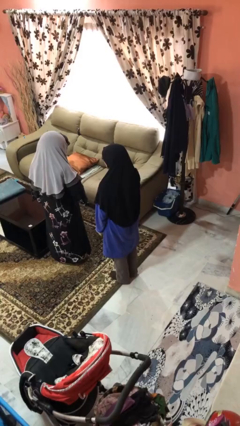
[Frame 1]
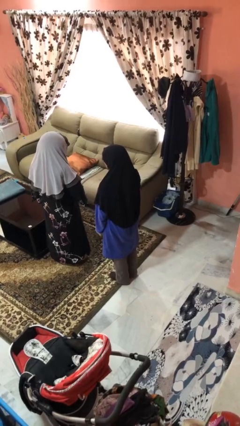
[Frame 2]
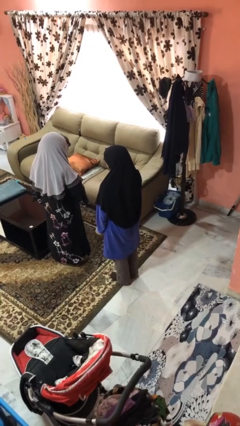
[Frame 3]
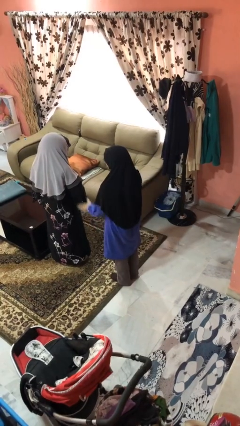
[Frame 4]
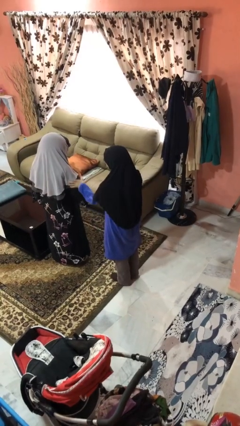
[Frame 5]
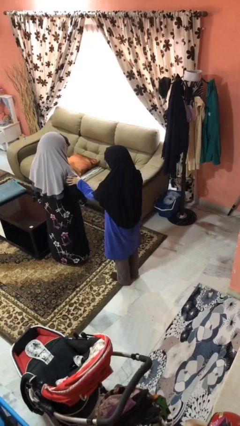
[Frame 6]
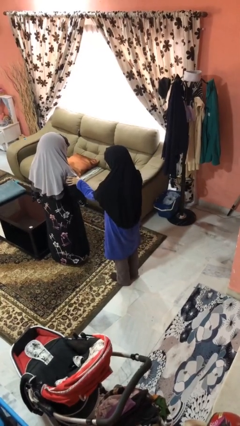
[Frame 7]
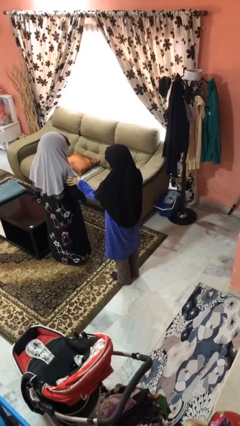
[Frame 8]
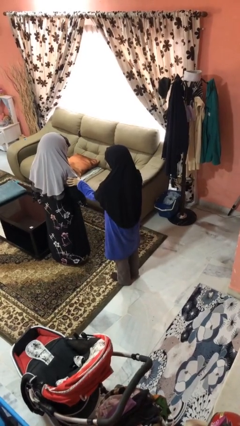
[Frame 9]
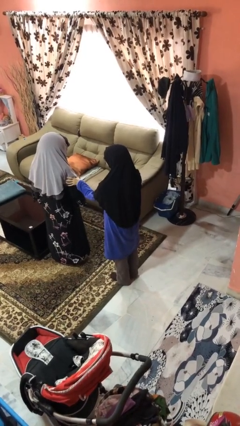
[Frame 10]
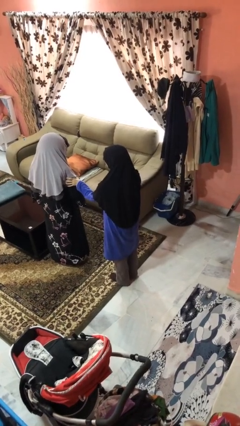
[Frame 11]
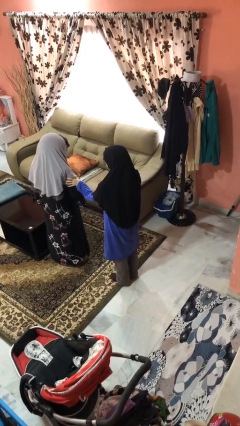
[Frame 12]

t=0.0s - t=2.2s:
person grabs person by bicep

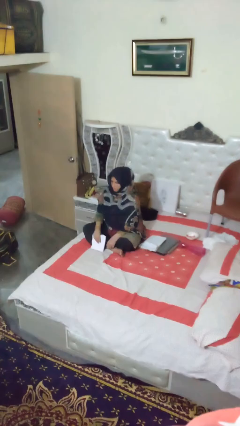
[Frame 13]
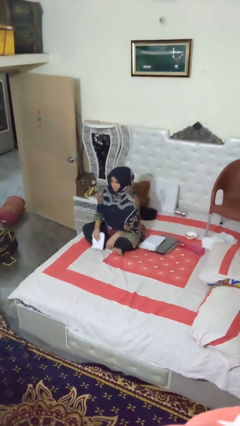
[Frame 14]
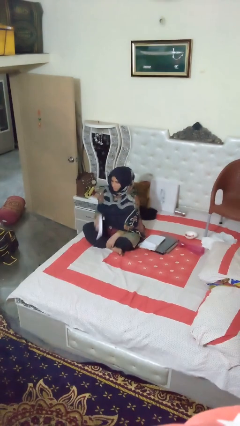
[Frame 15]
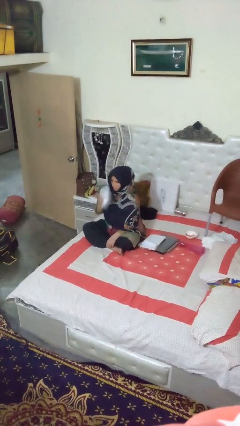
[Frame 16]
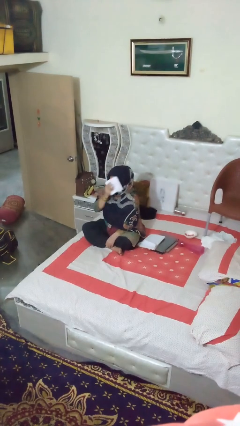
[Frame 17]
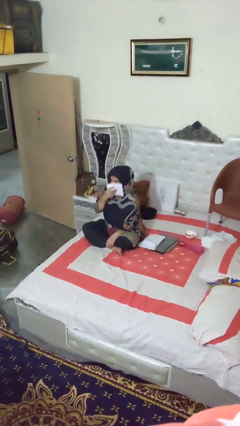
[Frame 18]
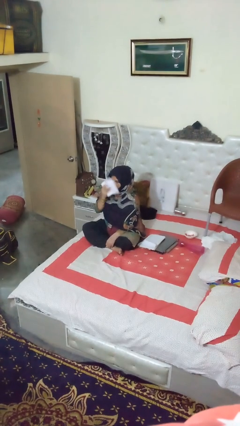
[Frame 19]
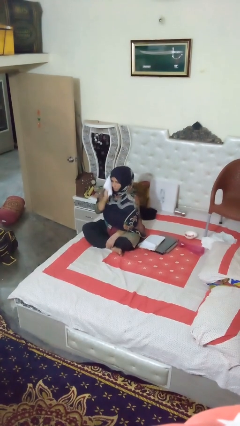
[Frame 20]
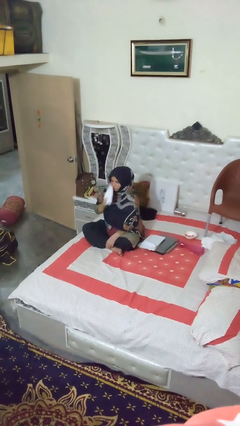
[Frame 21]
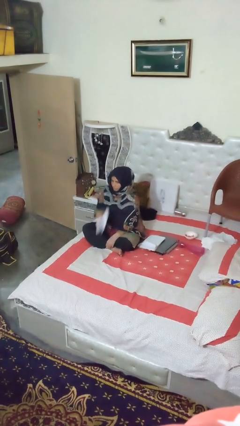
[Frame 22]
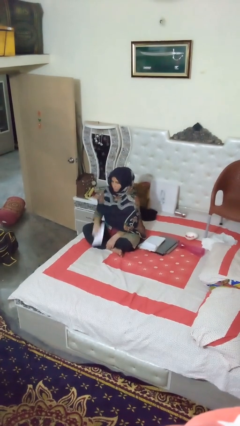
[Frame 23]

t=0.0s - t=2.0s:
person wipes mouth with napkin

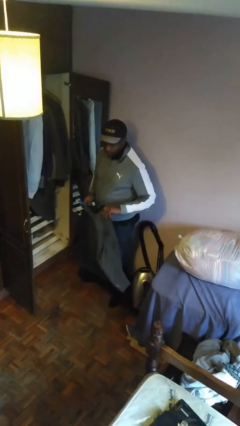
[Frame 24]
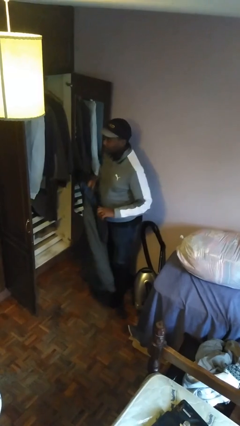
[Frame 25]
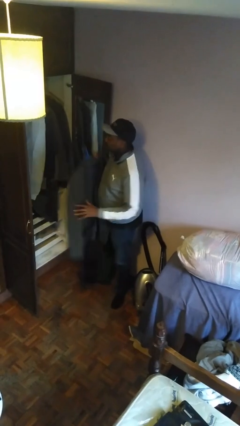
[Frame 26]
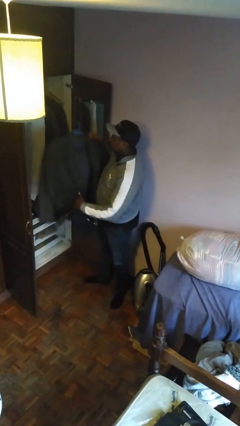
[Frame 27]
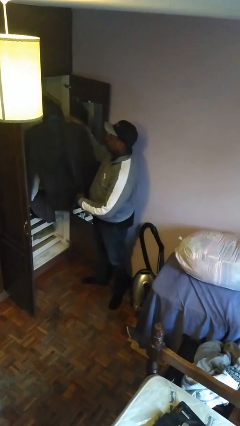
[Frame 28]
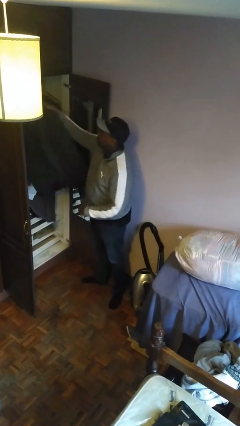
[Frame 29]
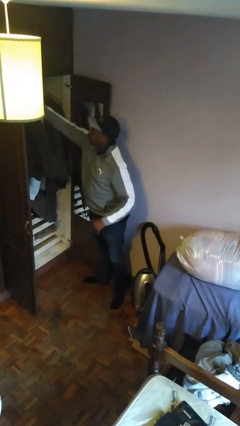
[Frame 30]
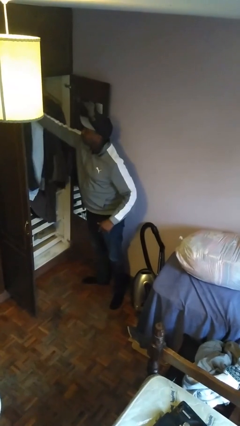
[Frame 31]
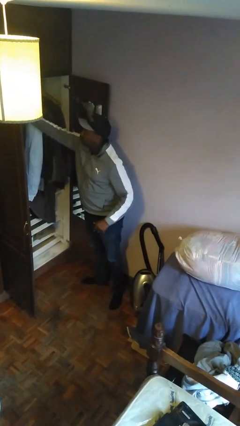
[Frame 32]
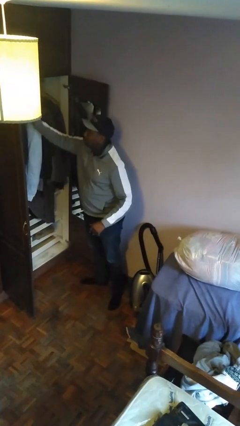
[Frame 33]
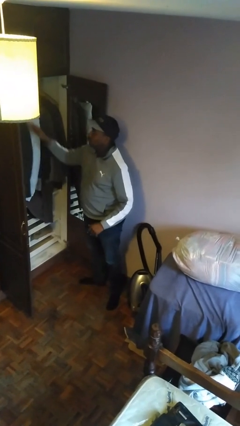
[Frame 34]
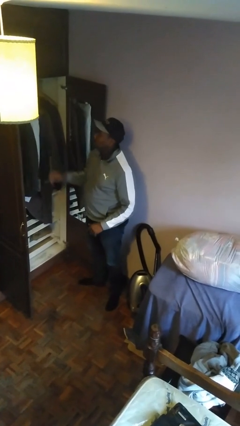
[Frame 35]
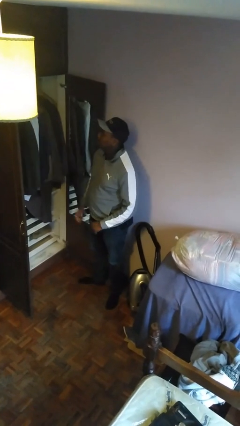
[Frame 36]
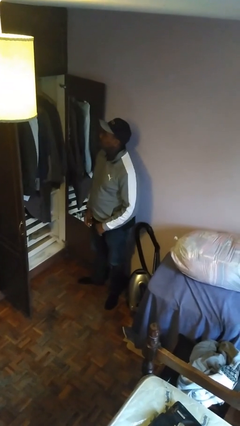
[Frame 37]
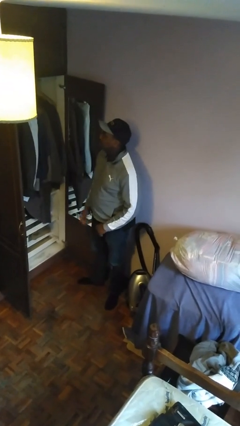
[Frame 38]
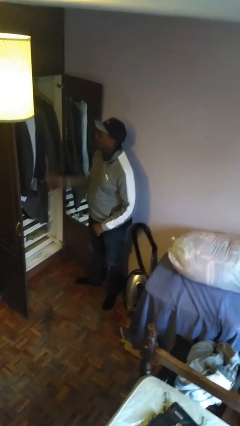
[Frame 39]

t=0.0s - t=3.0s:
person puts clothes into closet

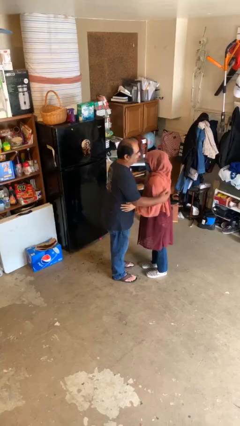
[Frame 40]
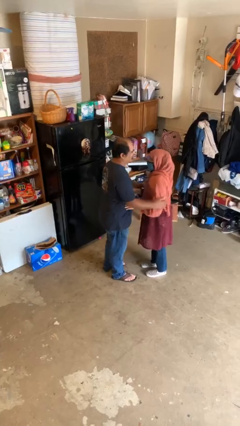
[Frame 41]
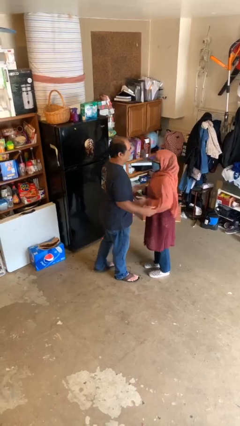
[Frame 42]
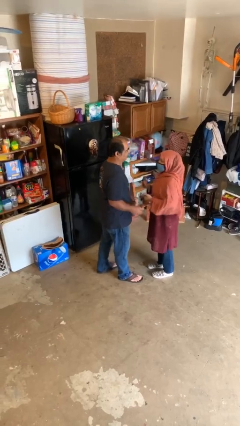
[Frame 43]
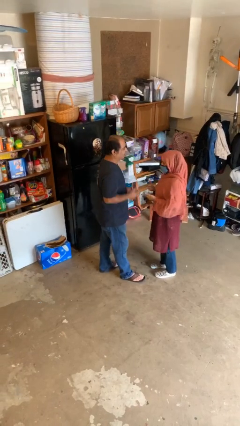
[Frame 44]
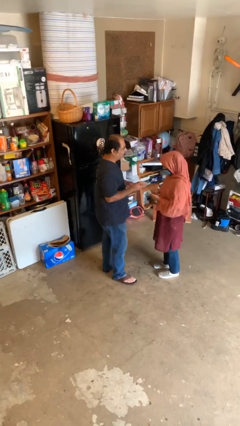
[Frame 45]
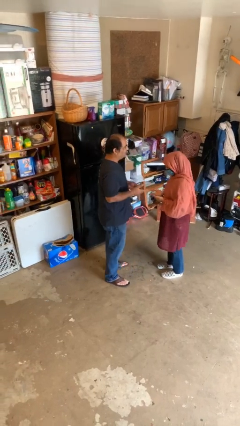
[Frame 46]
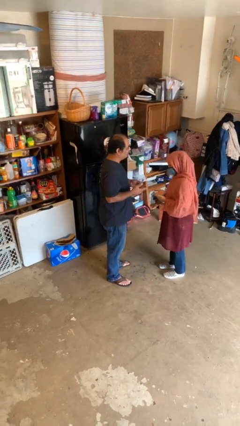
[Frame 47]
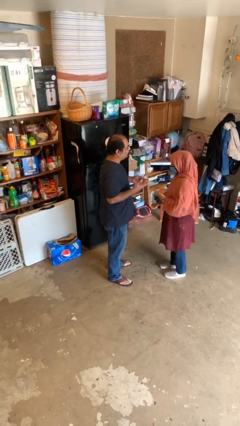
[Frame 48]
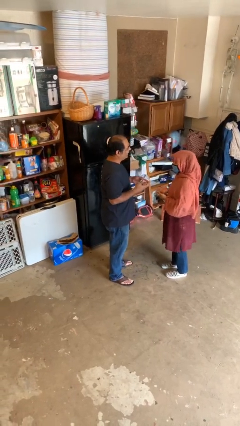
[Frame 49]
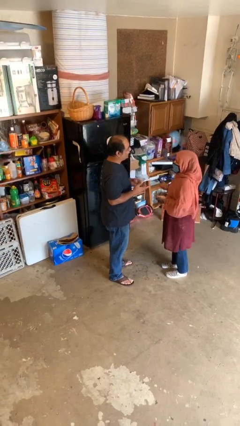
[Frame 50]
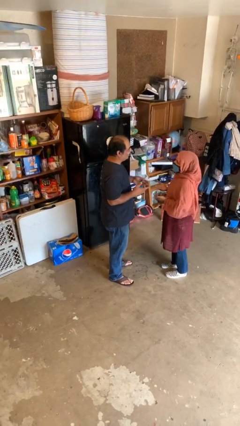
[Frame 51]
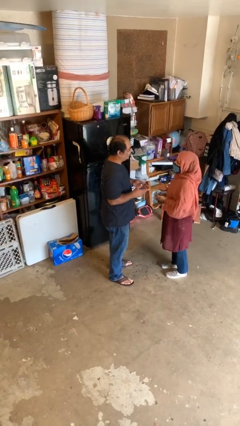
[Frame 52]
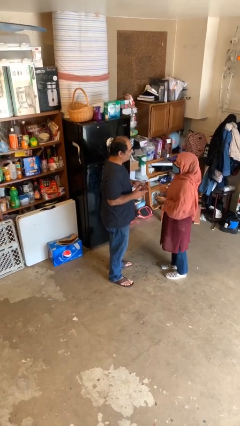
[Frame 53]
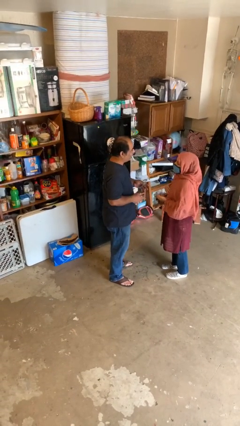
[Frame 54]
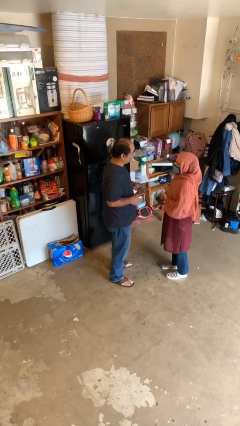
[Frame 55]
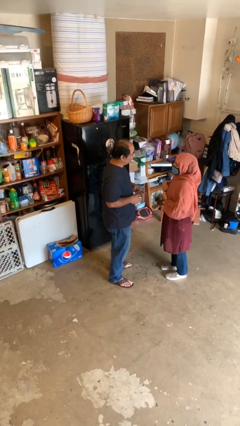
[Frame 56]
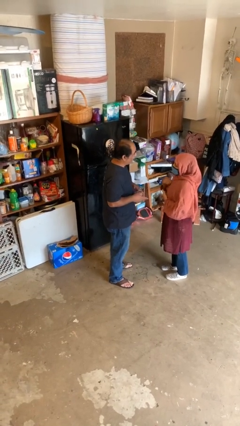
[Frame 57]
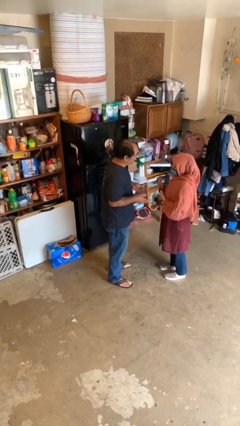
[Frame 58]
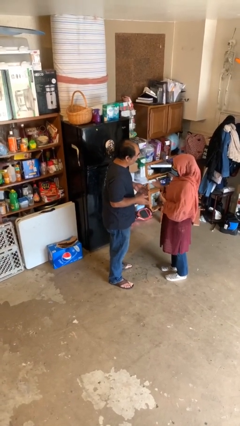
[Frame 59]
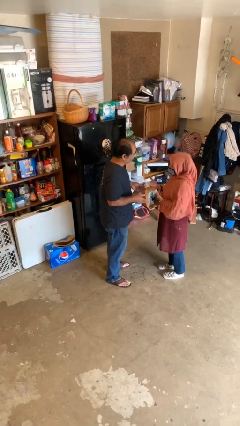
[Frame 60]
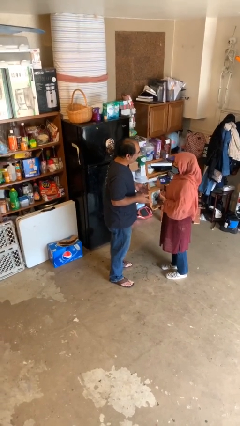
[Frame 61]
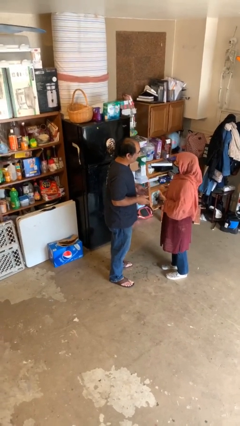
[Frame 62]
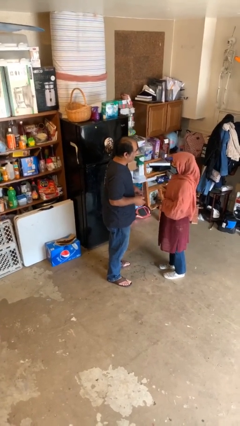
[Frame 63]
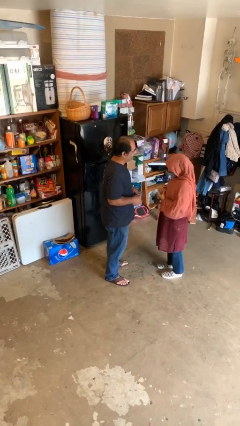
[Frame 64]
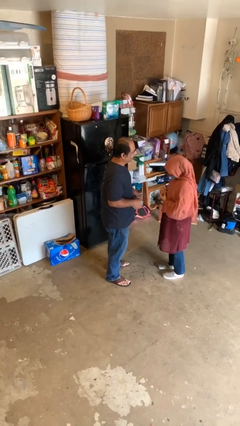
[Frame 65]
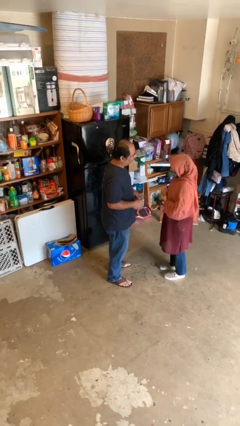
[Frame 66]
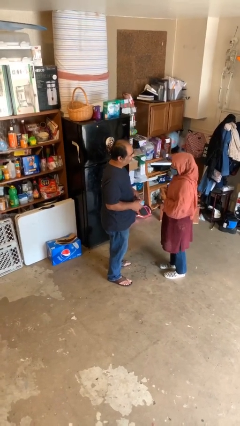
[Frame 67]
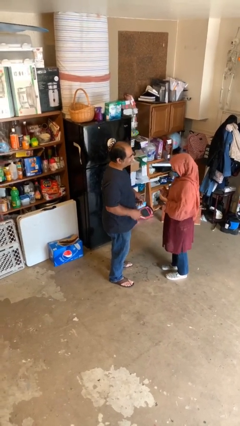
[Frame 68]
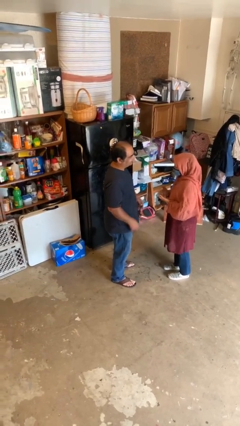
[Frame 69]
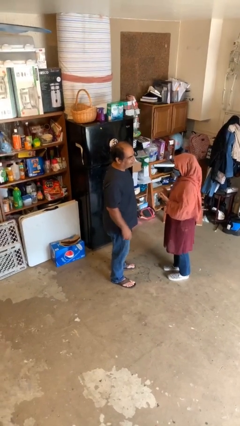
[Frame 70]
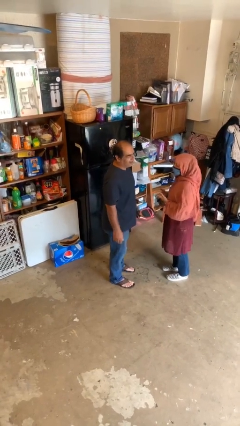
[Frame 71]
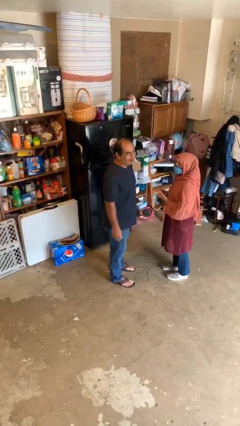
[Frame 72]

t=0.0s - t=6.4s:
person talks to person

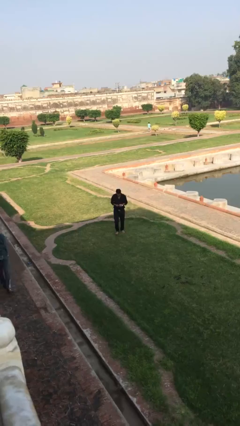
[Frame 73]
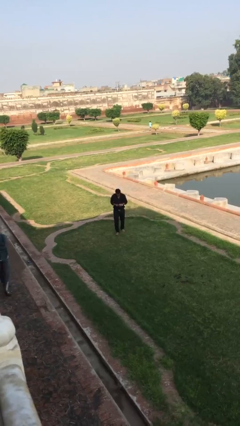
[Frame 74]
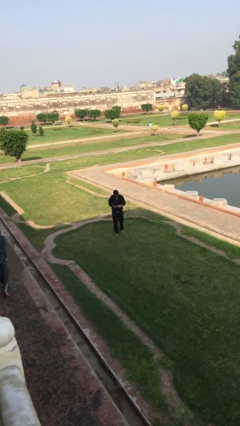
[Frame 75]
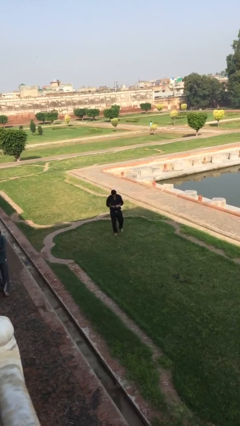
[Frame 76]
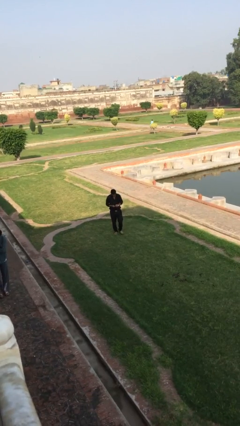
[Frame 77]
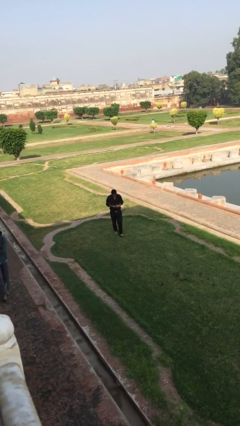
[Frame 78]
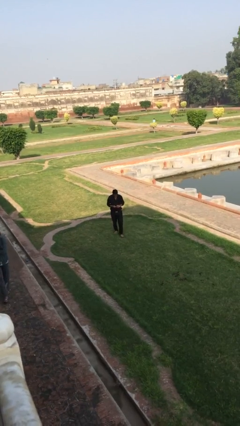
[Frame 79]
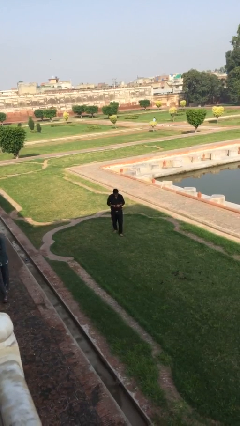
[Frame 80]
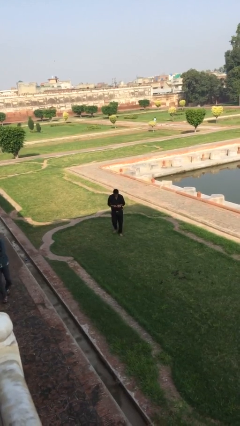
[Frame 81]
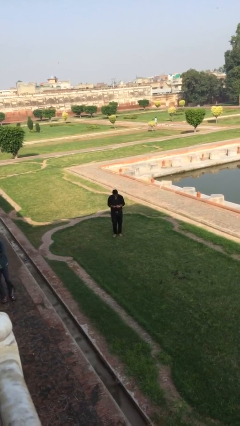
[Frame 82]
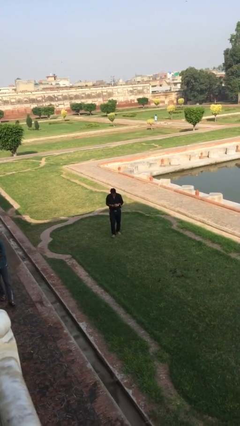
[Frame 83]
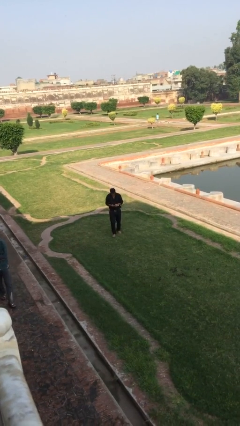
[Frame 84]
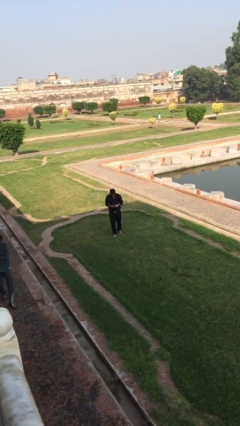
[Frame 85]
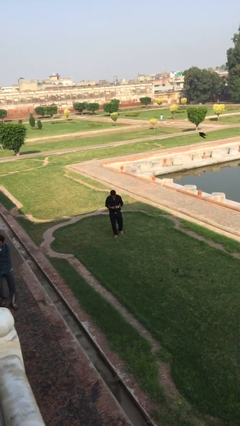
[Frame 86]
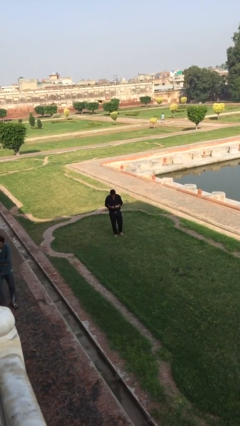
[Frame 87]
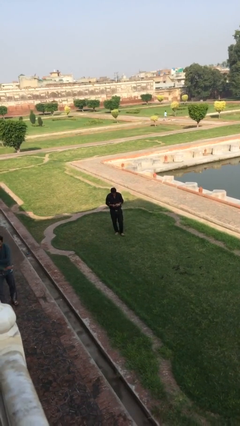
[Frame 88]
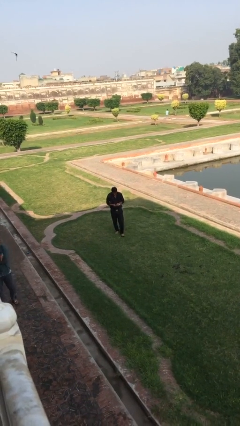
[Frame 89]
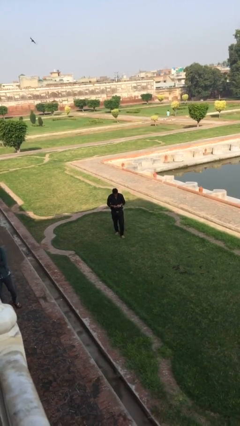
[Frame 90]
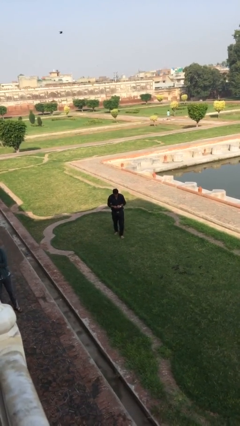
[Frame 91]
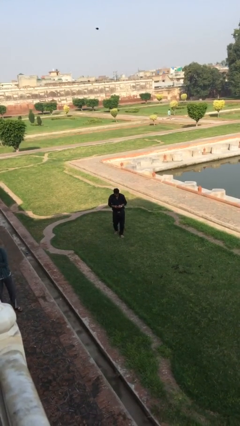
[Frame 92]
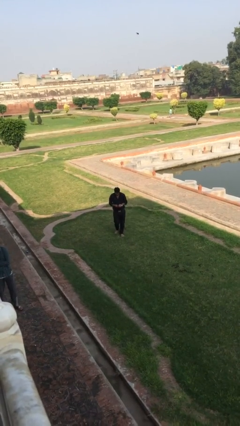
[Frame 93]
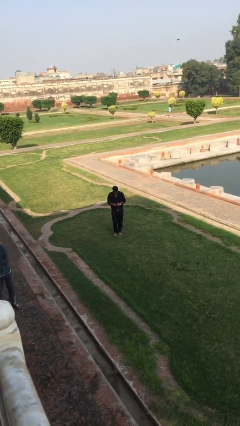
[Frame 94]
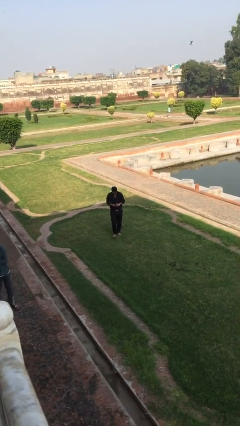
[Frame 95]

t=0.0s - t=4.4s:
person texts on phone
